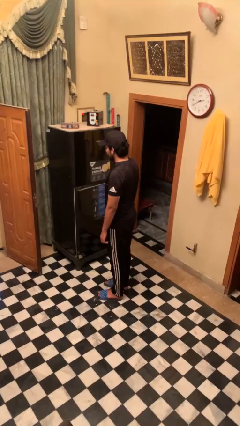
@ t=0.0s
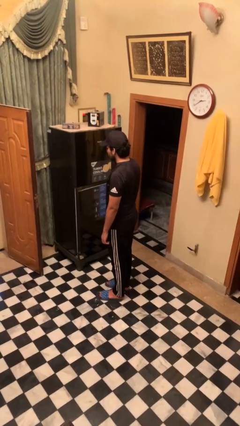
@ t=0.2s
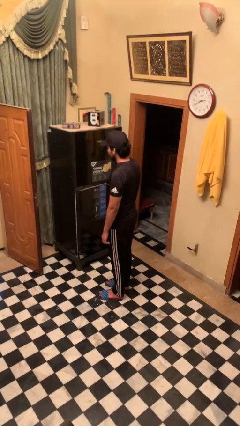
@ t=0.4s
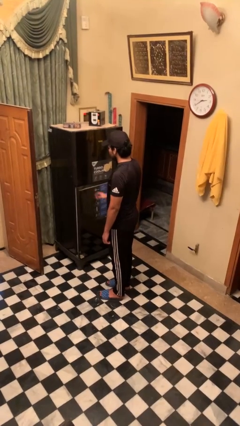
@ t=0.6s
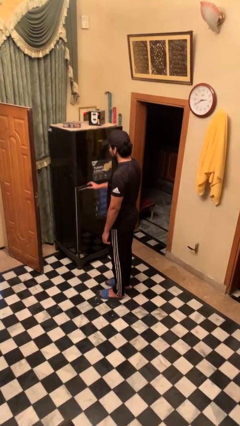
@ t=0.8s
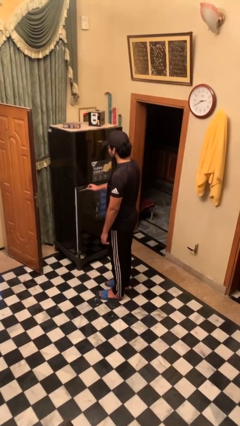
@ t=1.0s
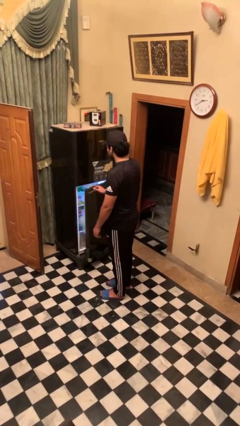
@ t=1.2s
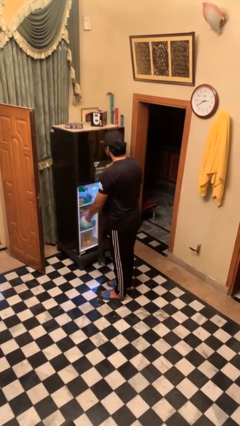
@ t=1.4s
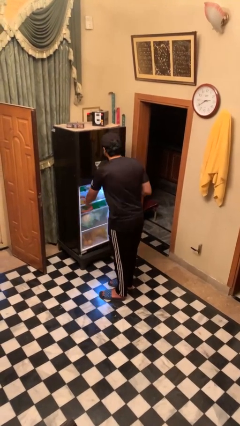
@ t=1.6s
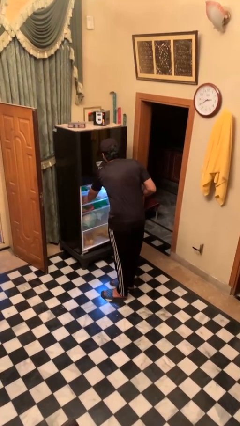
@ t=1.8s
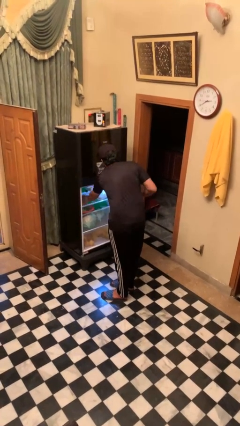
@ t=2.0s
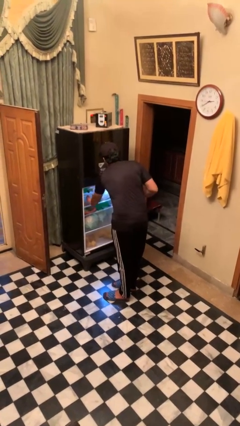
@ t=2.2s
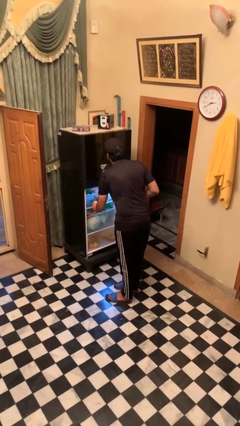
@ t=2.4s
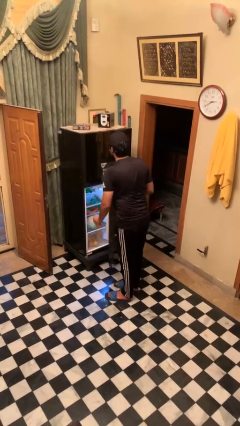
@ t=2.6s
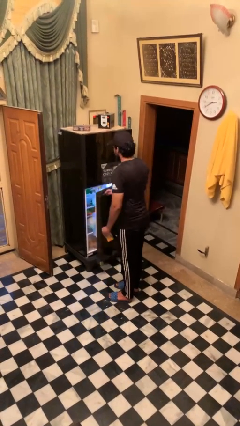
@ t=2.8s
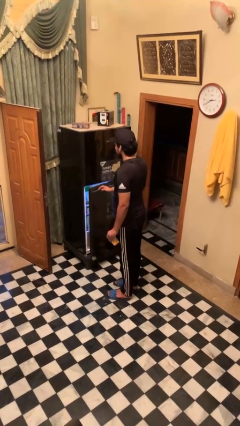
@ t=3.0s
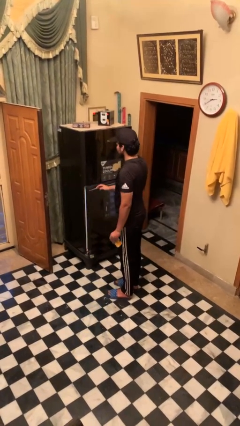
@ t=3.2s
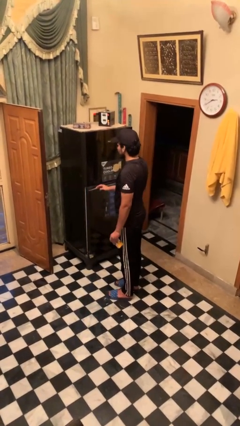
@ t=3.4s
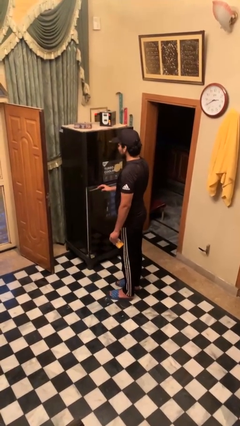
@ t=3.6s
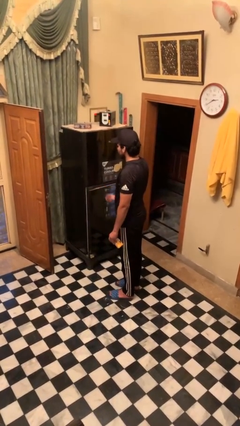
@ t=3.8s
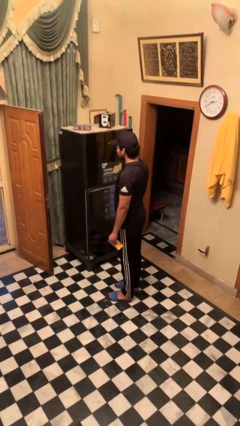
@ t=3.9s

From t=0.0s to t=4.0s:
person takes object from refrigerator

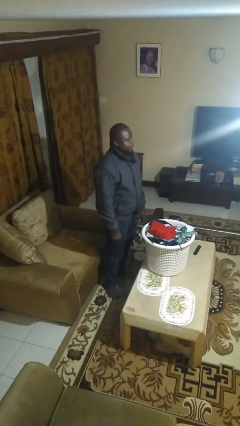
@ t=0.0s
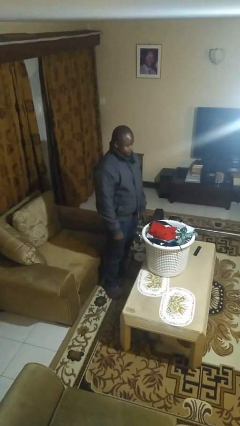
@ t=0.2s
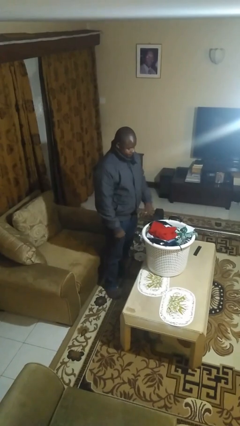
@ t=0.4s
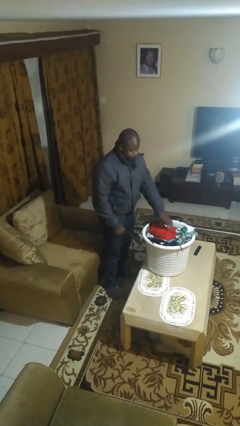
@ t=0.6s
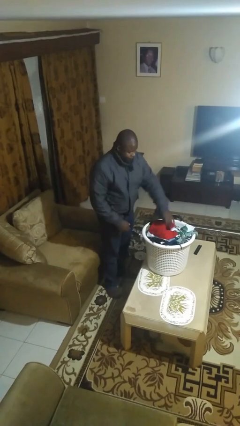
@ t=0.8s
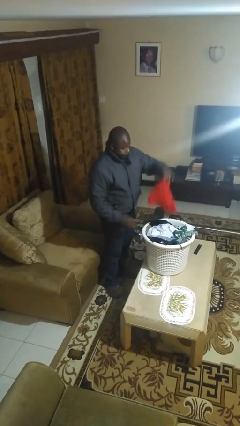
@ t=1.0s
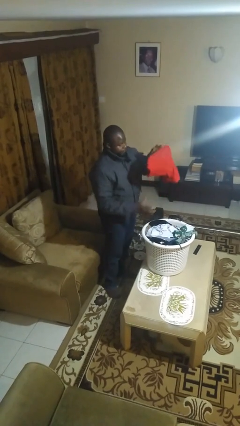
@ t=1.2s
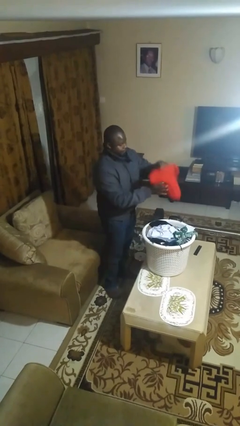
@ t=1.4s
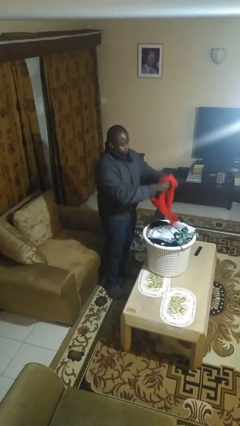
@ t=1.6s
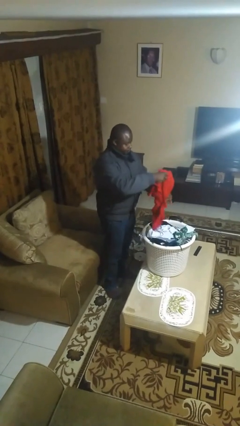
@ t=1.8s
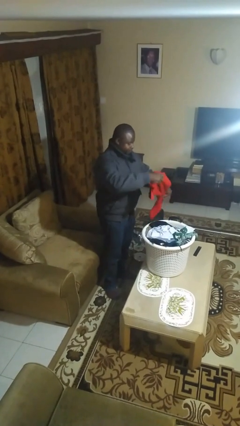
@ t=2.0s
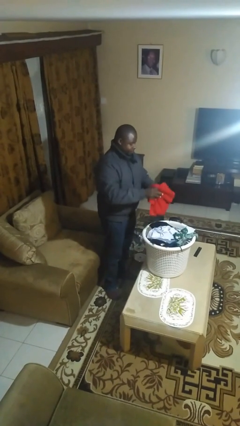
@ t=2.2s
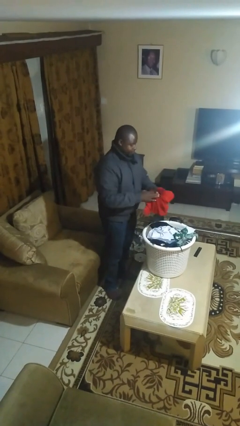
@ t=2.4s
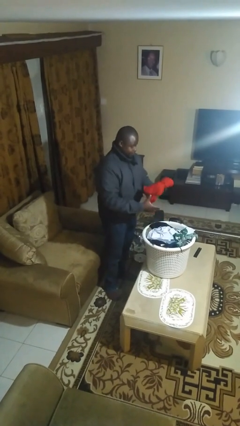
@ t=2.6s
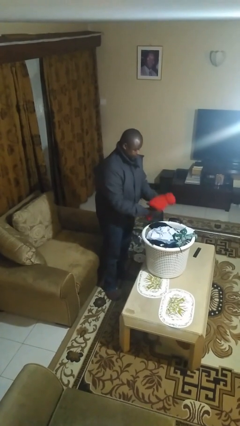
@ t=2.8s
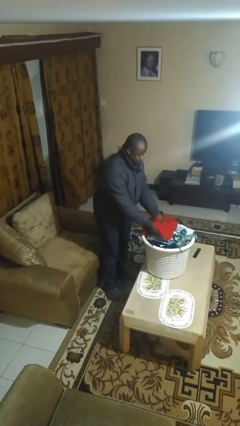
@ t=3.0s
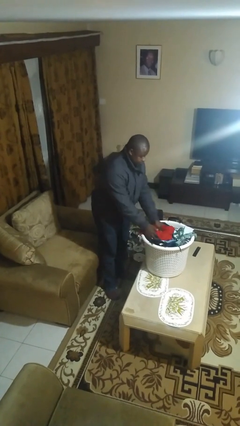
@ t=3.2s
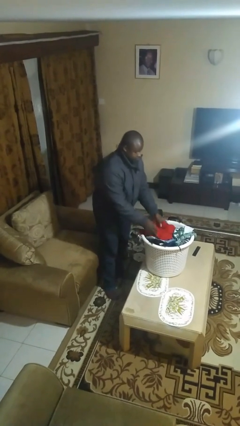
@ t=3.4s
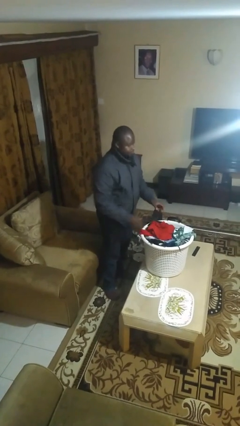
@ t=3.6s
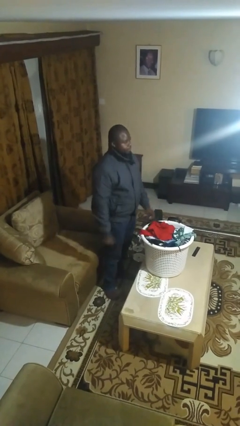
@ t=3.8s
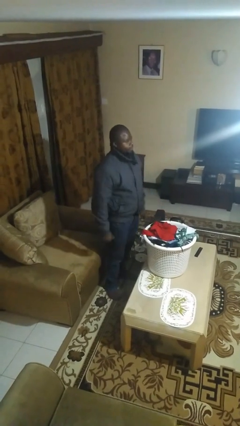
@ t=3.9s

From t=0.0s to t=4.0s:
person folds shirt

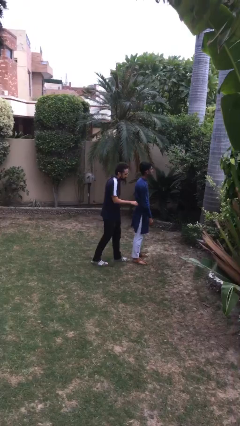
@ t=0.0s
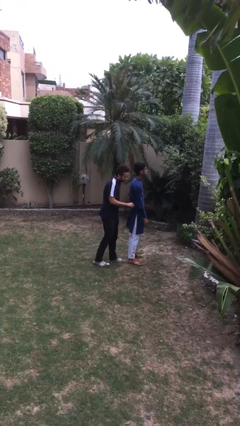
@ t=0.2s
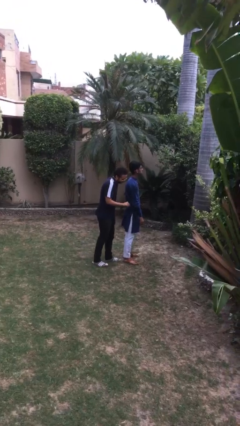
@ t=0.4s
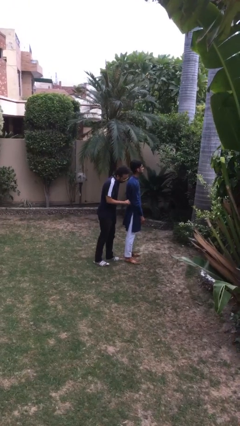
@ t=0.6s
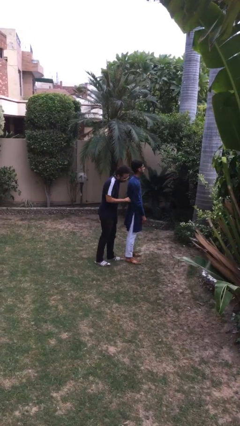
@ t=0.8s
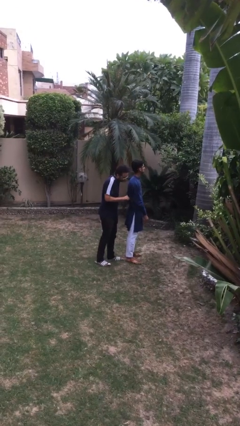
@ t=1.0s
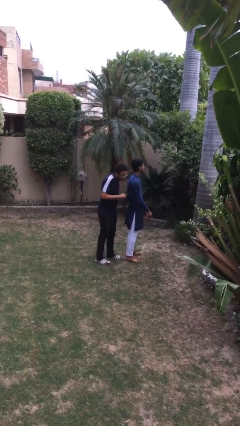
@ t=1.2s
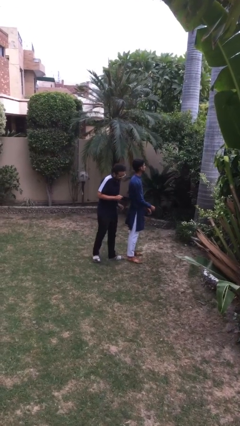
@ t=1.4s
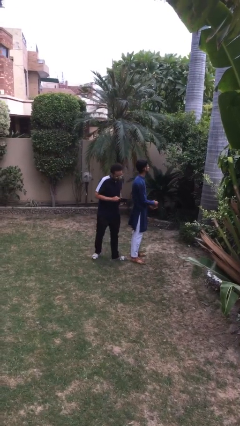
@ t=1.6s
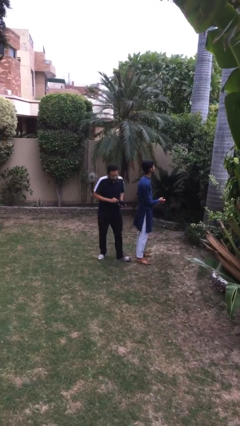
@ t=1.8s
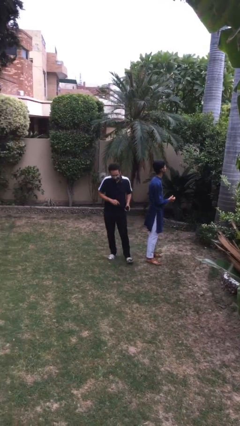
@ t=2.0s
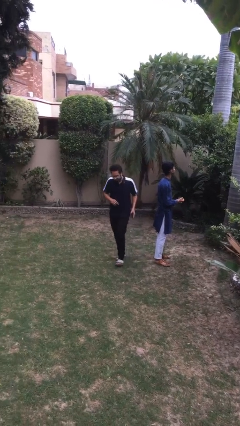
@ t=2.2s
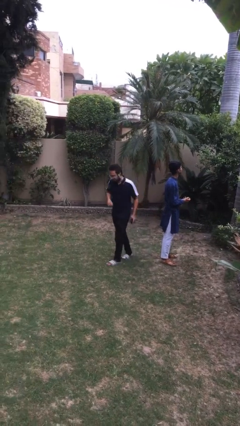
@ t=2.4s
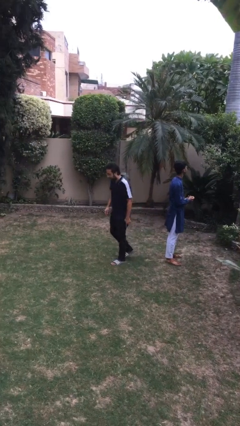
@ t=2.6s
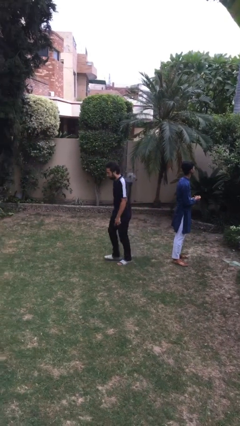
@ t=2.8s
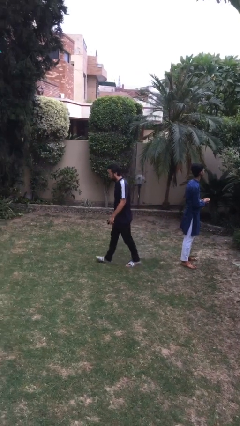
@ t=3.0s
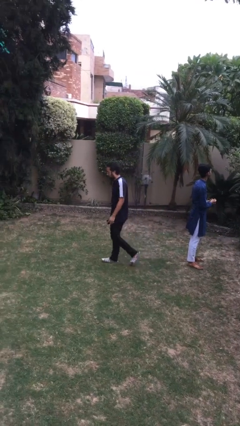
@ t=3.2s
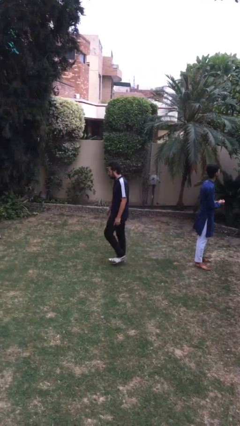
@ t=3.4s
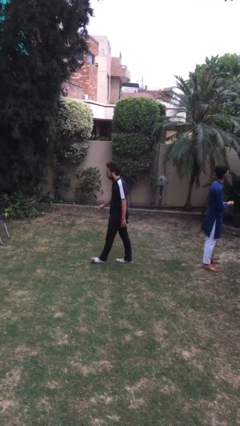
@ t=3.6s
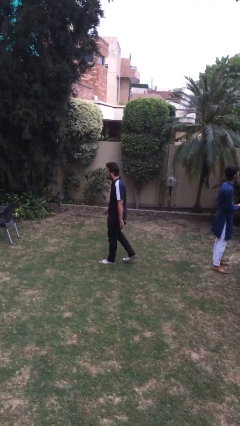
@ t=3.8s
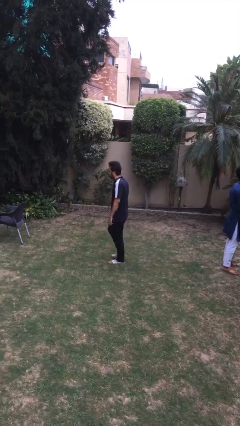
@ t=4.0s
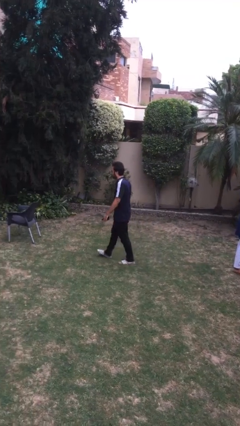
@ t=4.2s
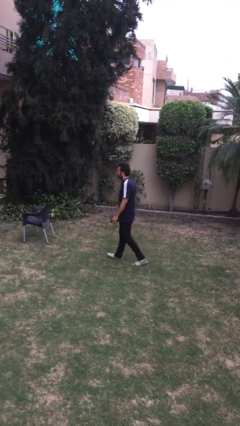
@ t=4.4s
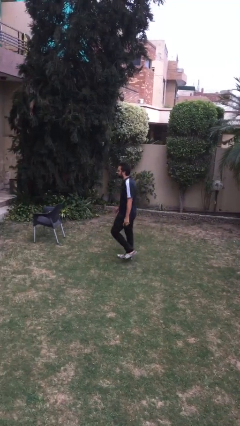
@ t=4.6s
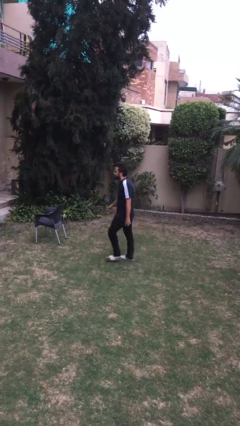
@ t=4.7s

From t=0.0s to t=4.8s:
person steals object from person

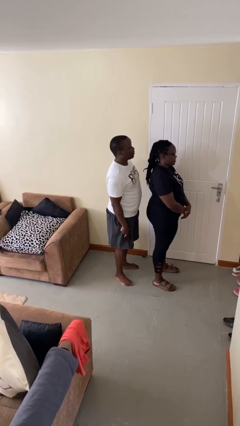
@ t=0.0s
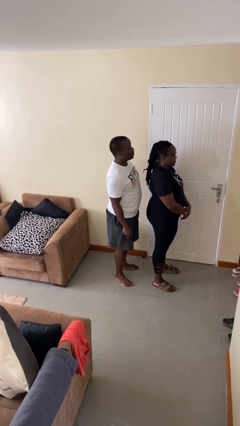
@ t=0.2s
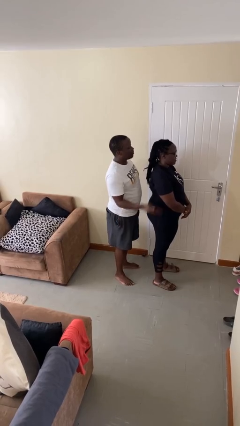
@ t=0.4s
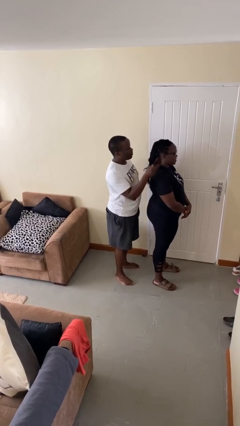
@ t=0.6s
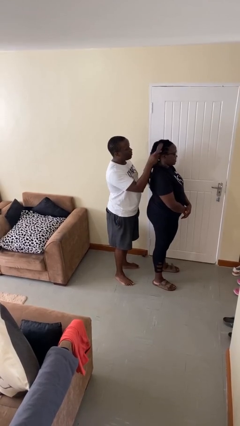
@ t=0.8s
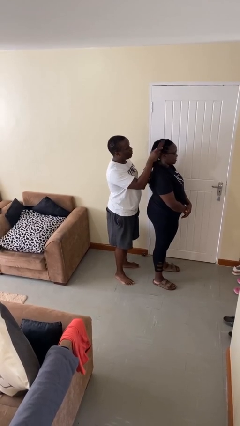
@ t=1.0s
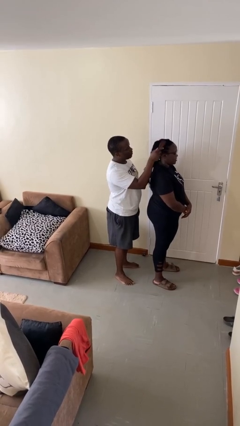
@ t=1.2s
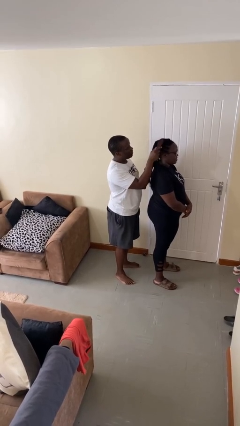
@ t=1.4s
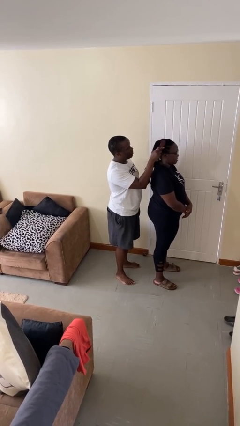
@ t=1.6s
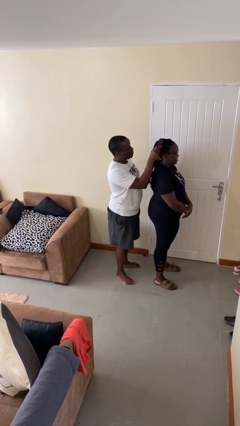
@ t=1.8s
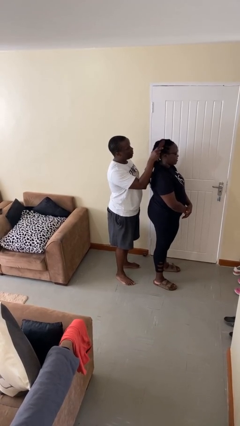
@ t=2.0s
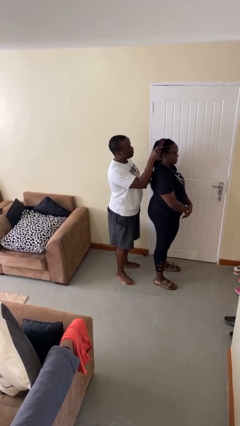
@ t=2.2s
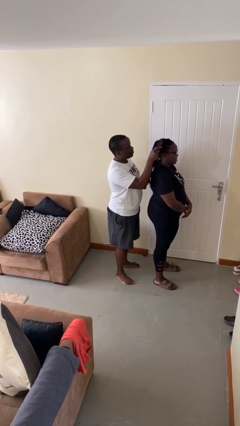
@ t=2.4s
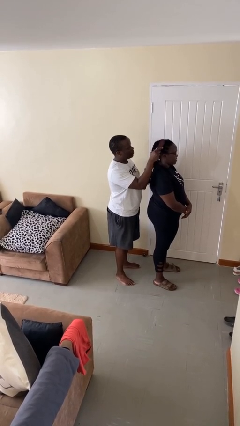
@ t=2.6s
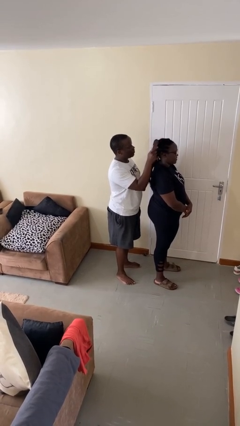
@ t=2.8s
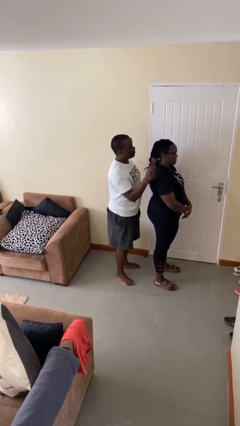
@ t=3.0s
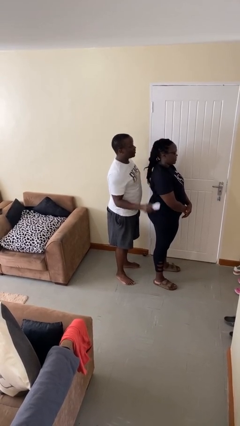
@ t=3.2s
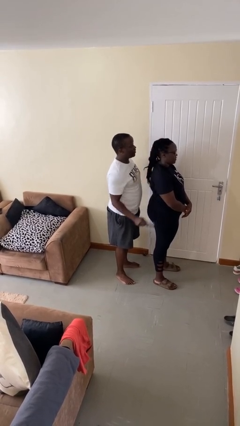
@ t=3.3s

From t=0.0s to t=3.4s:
person brushes hair of person

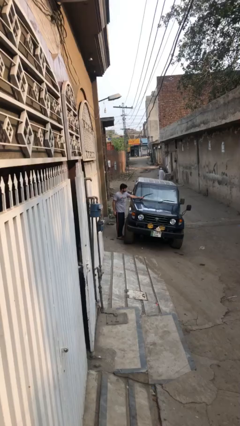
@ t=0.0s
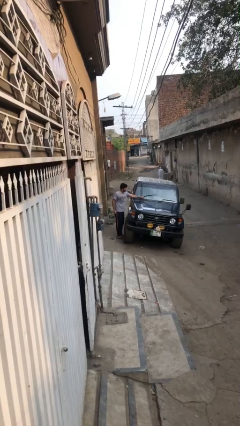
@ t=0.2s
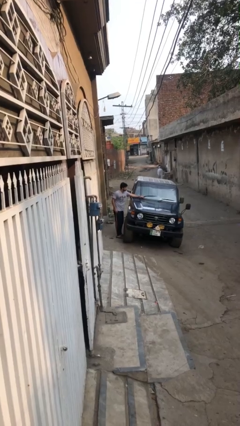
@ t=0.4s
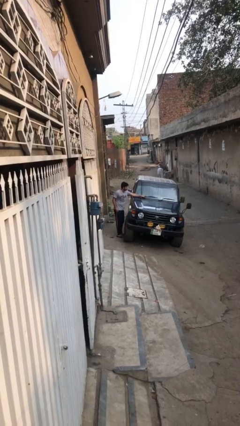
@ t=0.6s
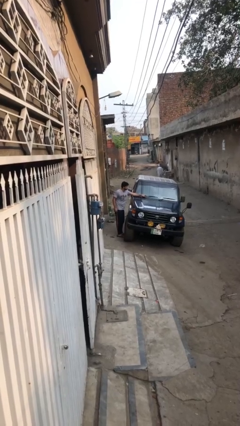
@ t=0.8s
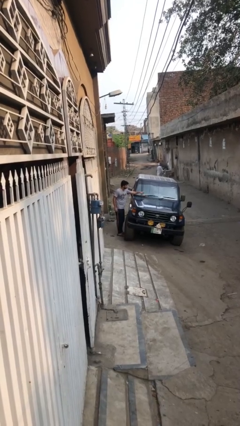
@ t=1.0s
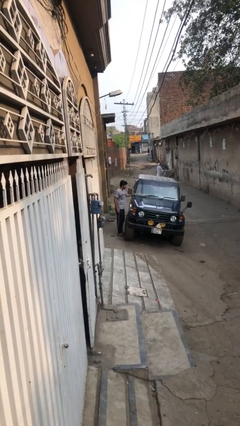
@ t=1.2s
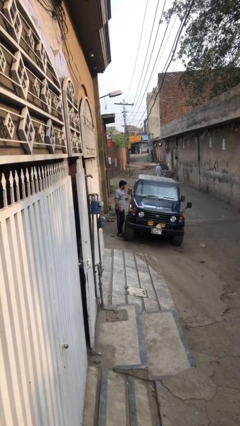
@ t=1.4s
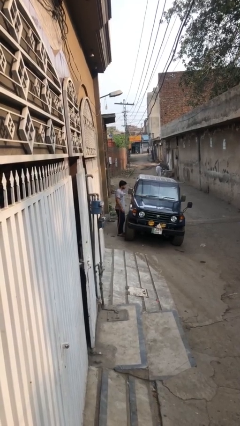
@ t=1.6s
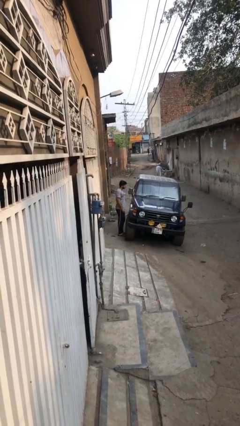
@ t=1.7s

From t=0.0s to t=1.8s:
person flips down car wipers
